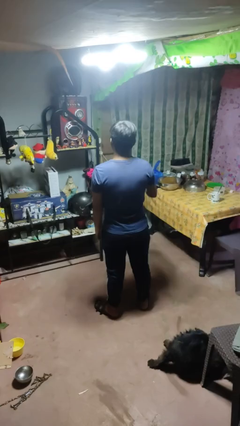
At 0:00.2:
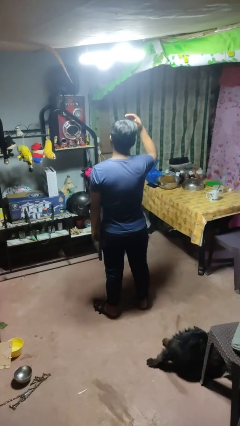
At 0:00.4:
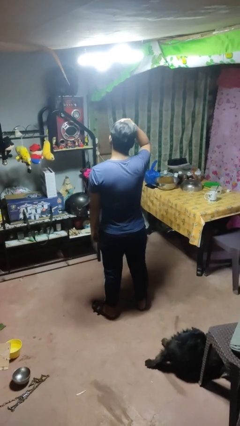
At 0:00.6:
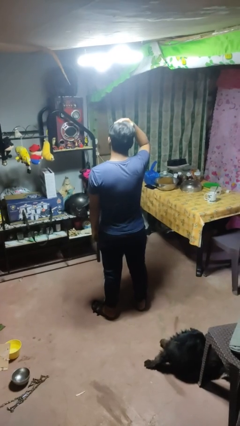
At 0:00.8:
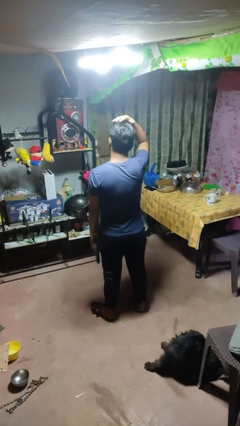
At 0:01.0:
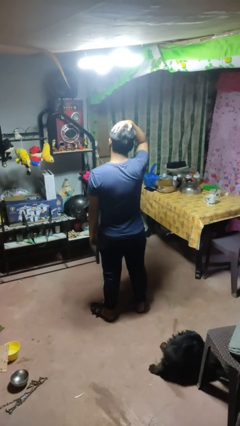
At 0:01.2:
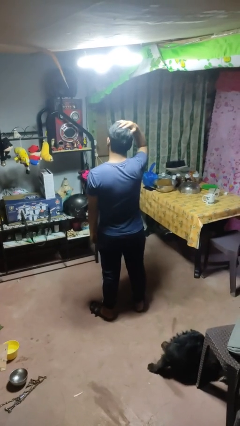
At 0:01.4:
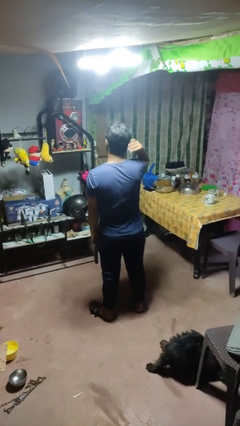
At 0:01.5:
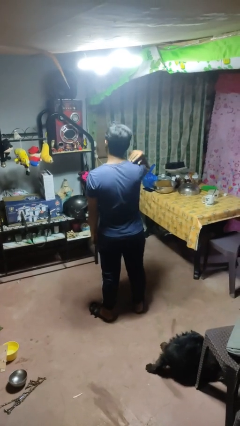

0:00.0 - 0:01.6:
person pats head

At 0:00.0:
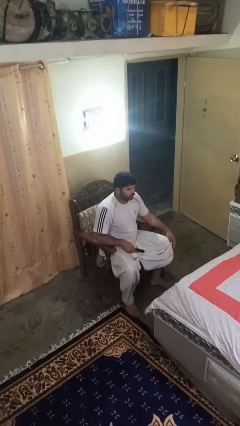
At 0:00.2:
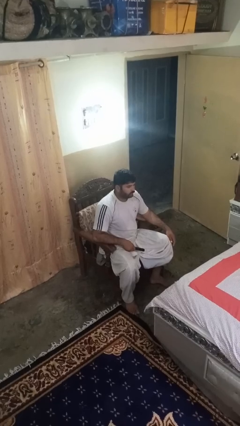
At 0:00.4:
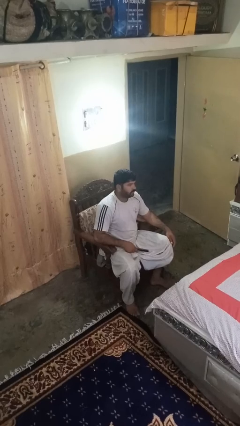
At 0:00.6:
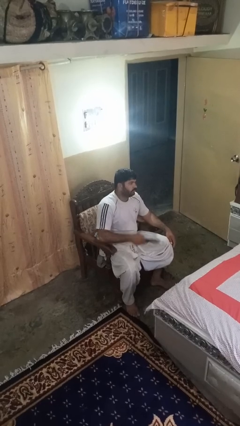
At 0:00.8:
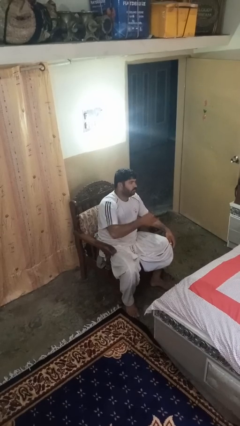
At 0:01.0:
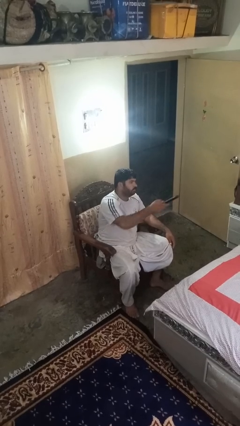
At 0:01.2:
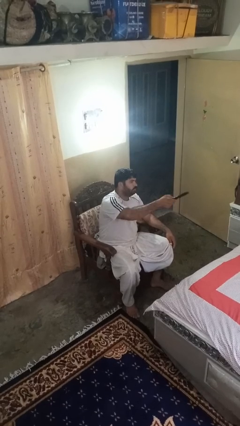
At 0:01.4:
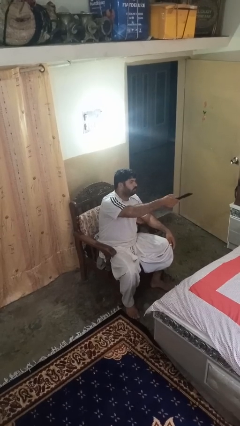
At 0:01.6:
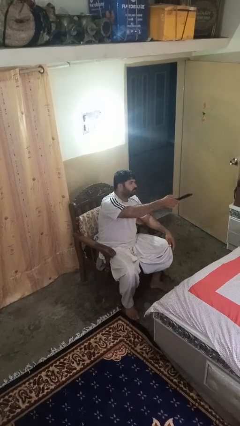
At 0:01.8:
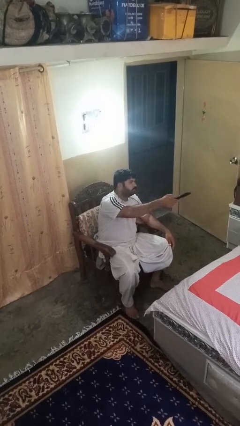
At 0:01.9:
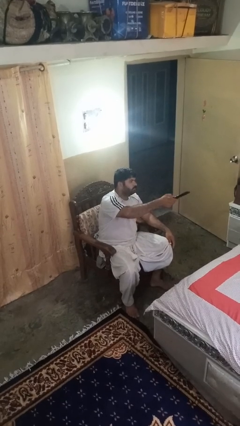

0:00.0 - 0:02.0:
person uses television remote

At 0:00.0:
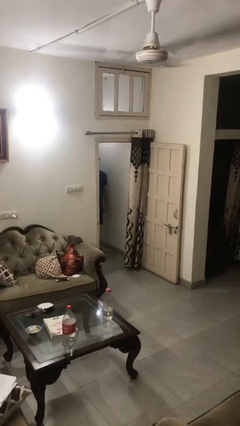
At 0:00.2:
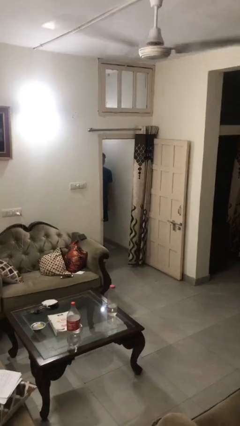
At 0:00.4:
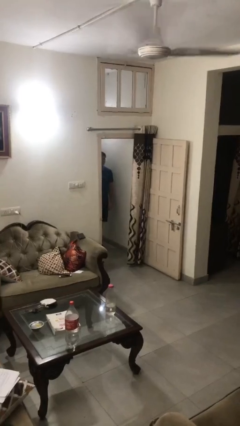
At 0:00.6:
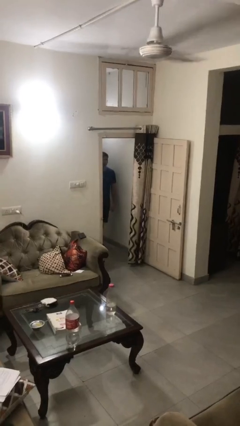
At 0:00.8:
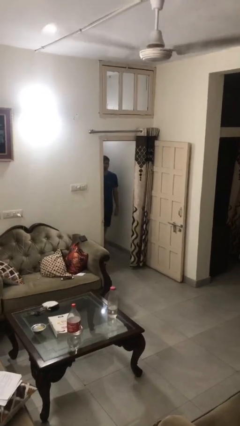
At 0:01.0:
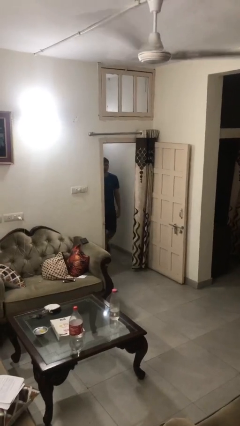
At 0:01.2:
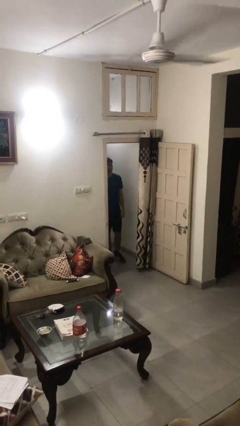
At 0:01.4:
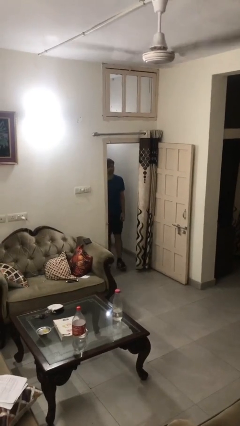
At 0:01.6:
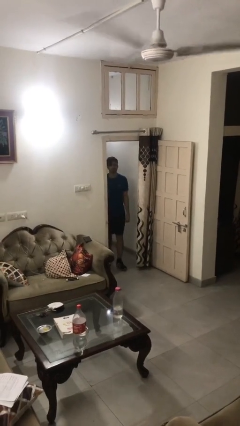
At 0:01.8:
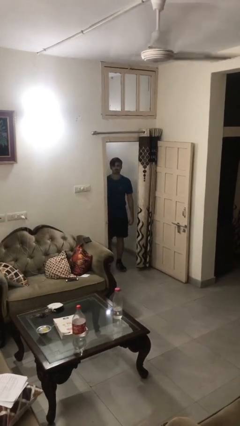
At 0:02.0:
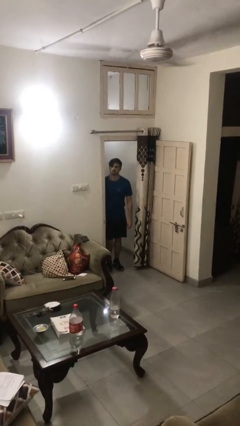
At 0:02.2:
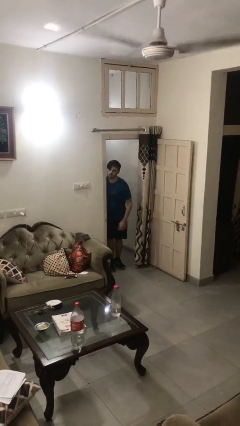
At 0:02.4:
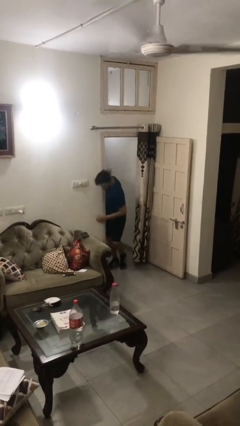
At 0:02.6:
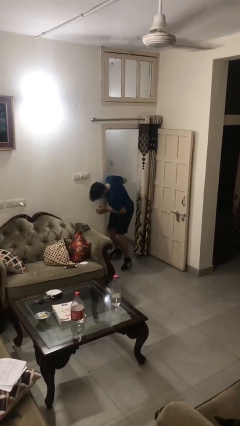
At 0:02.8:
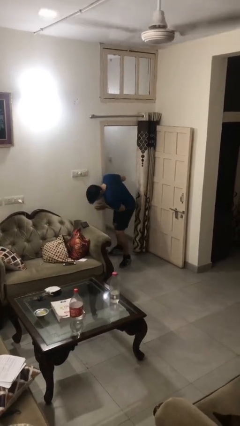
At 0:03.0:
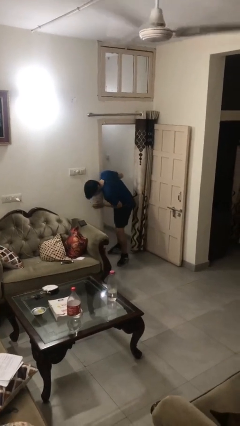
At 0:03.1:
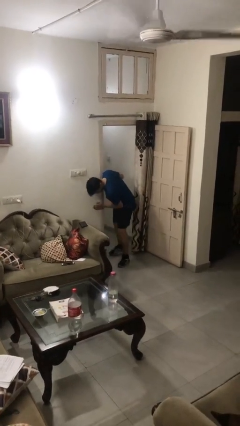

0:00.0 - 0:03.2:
person bumps into wall

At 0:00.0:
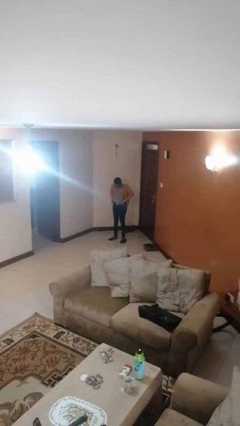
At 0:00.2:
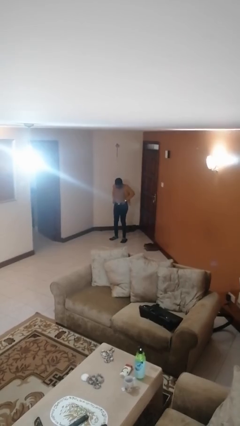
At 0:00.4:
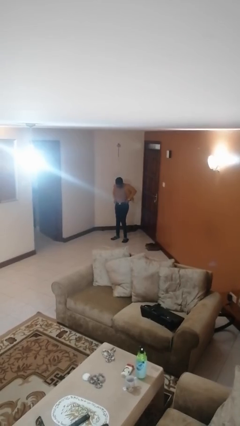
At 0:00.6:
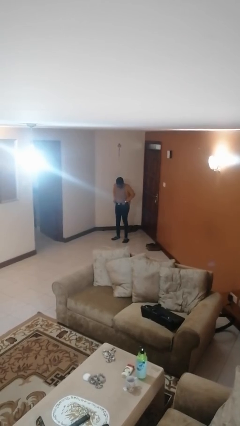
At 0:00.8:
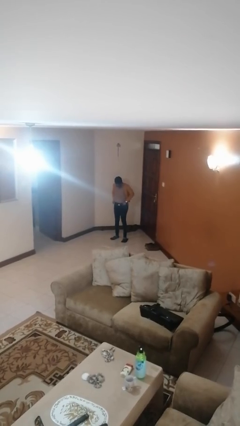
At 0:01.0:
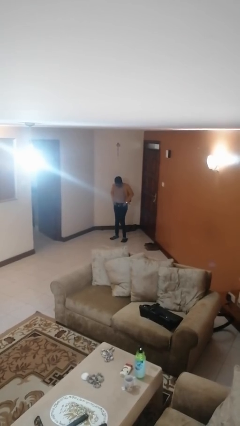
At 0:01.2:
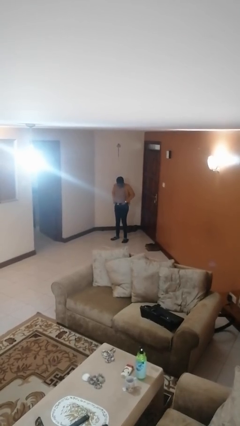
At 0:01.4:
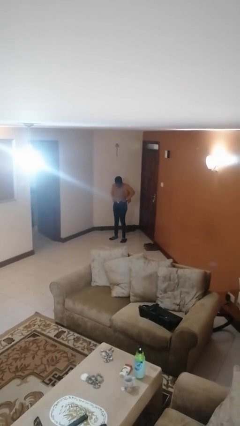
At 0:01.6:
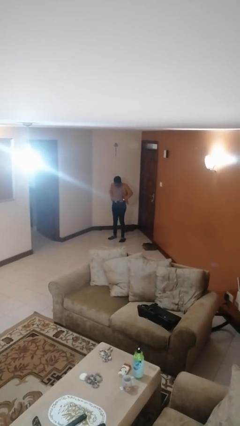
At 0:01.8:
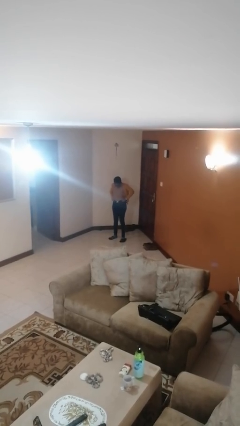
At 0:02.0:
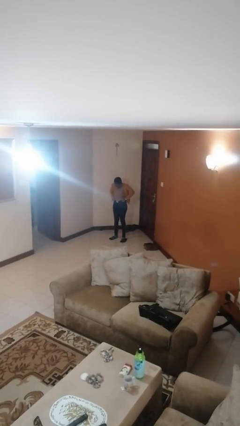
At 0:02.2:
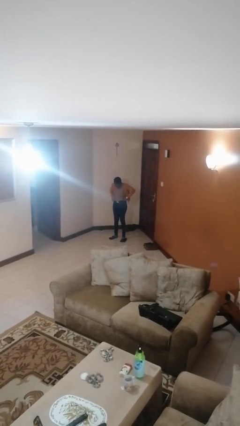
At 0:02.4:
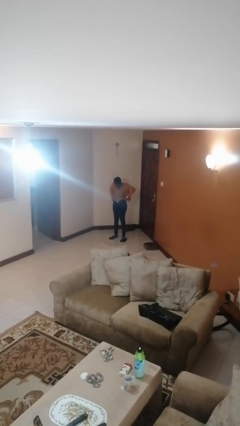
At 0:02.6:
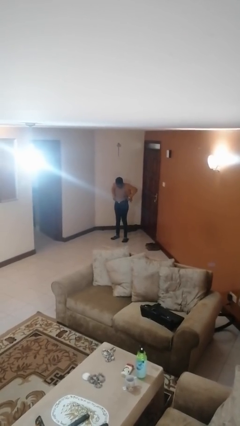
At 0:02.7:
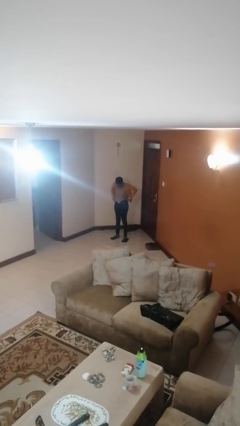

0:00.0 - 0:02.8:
person hikes up pants

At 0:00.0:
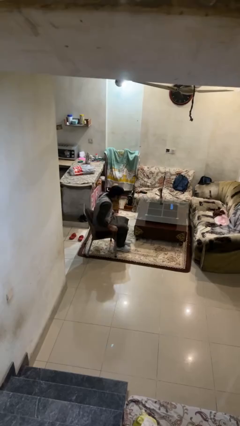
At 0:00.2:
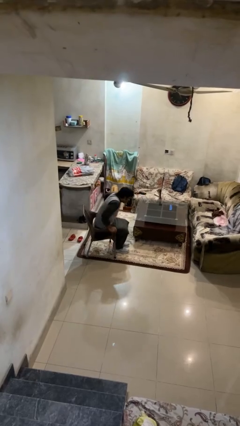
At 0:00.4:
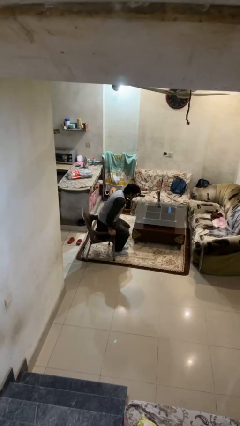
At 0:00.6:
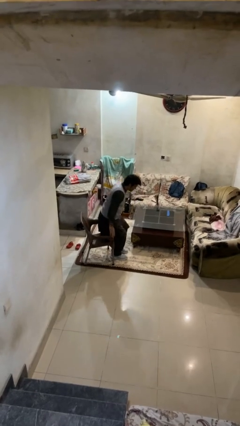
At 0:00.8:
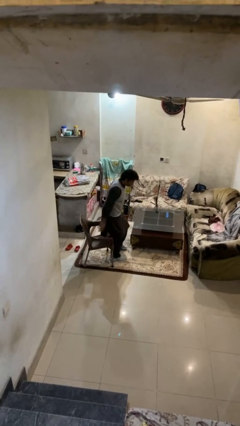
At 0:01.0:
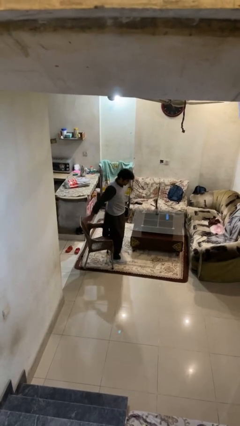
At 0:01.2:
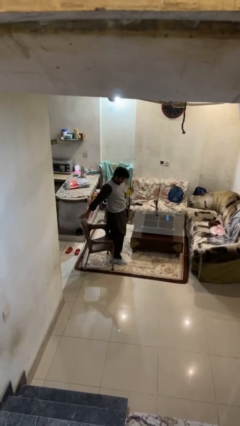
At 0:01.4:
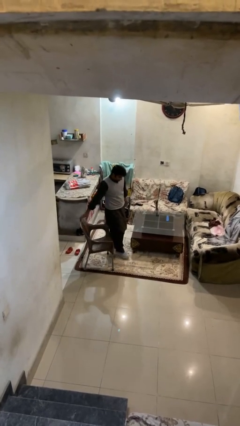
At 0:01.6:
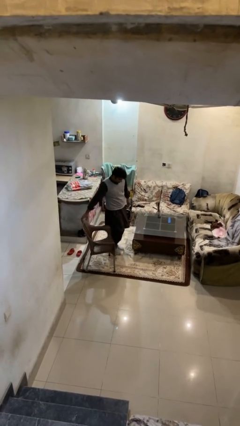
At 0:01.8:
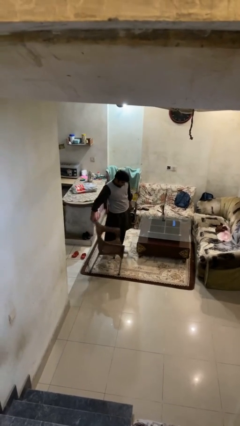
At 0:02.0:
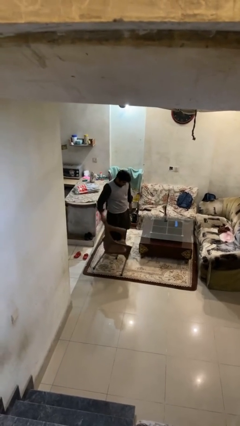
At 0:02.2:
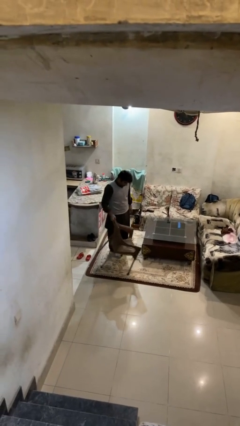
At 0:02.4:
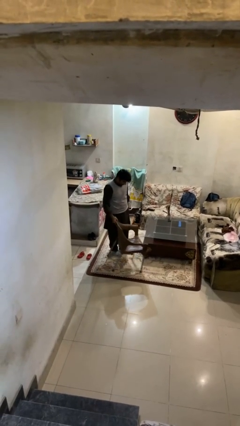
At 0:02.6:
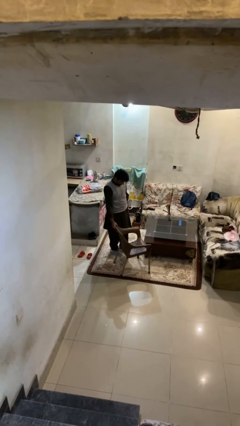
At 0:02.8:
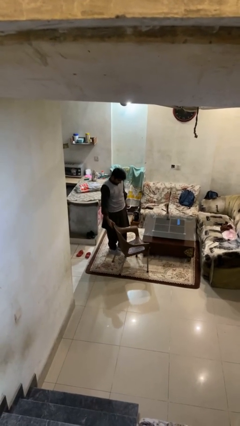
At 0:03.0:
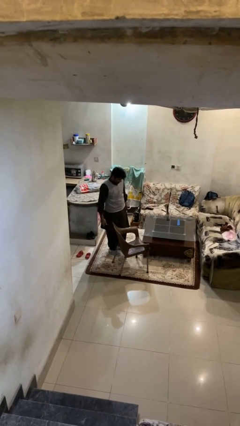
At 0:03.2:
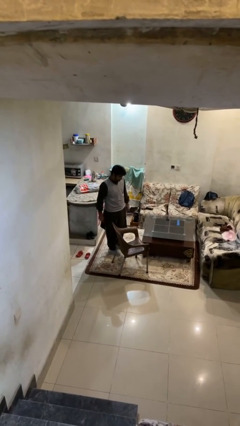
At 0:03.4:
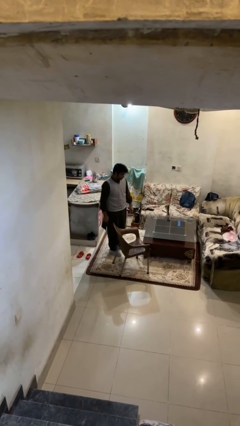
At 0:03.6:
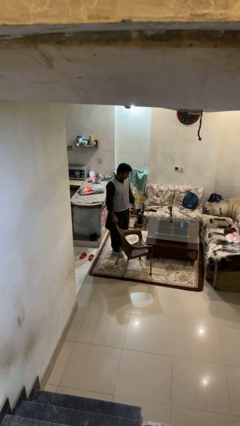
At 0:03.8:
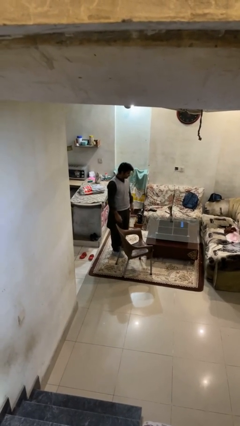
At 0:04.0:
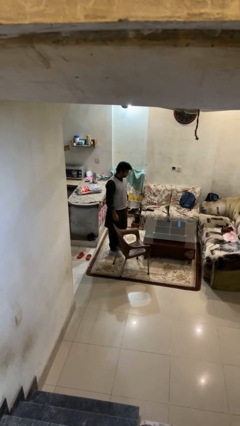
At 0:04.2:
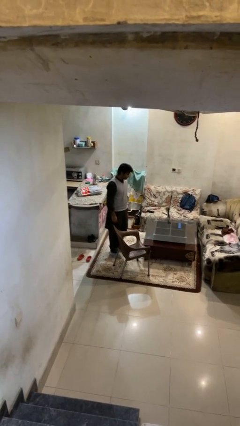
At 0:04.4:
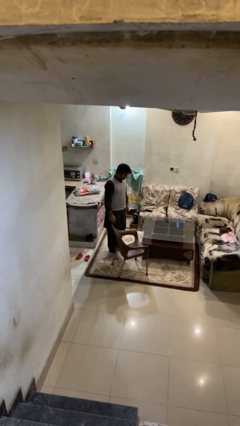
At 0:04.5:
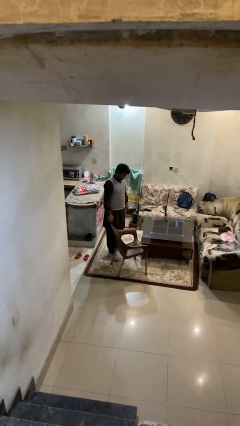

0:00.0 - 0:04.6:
person stands up

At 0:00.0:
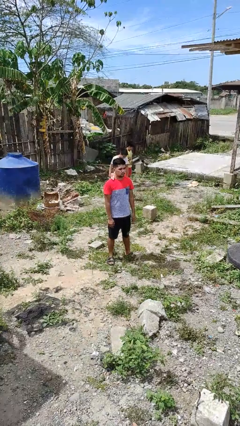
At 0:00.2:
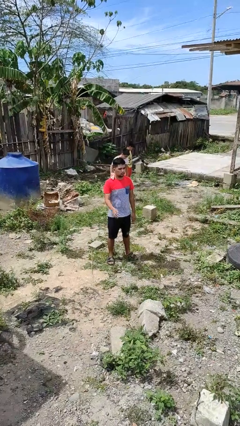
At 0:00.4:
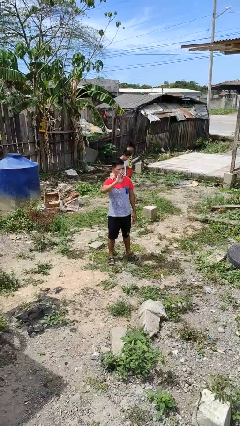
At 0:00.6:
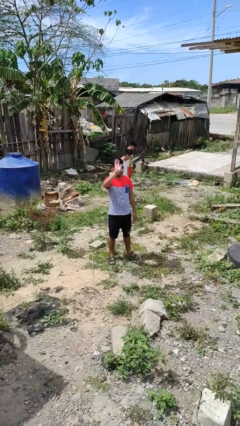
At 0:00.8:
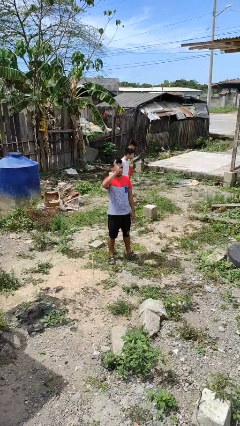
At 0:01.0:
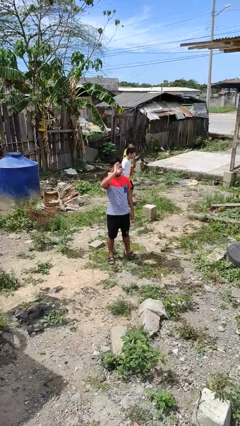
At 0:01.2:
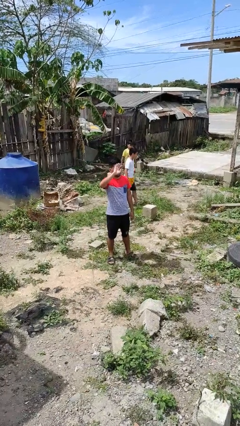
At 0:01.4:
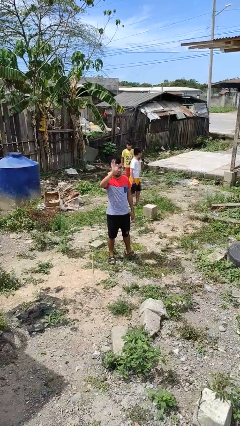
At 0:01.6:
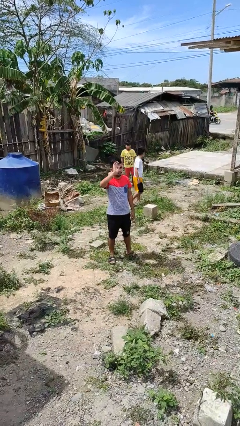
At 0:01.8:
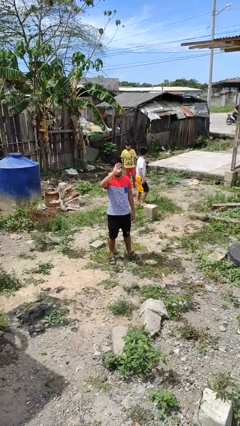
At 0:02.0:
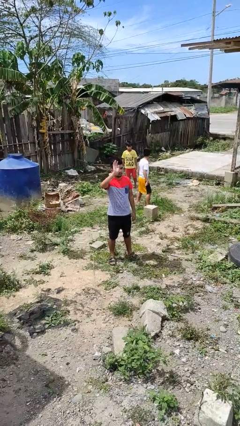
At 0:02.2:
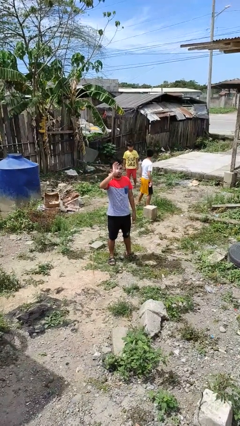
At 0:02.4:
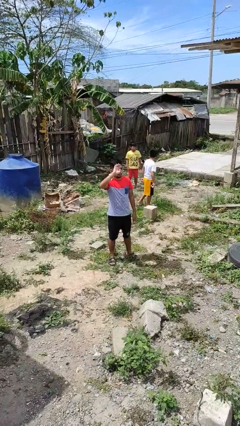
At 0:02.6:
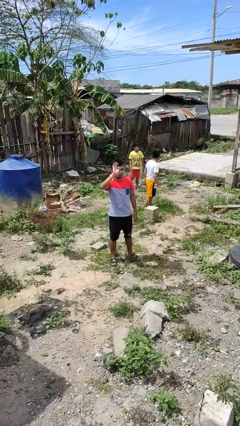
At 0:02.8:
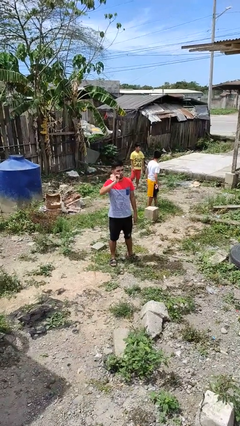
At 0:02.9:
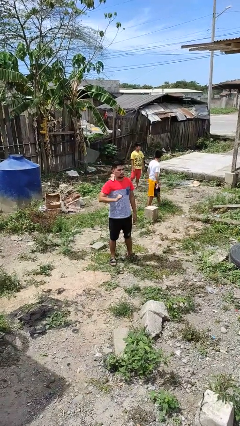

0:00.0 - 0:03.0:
person waves at person
